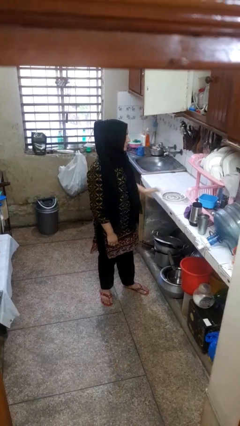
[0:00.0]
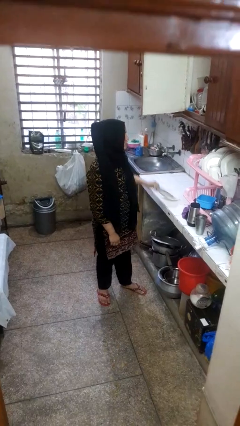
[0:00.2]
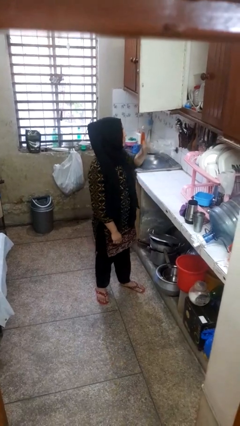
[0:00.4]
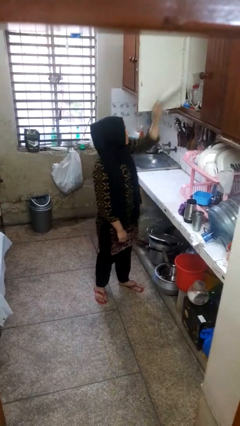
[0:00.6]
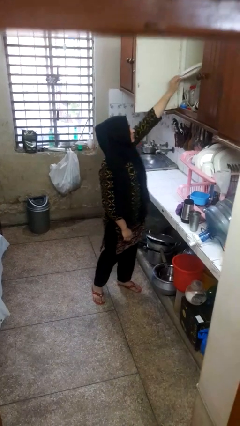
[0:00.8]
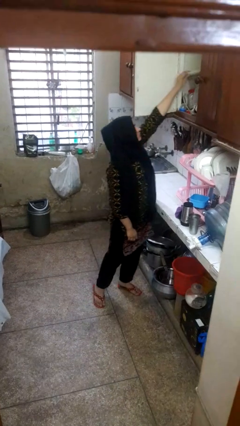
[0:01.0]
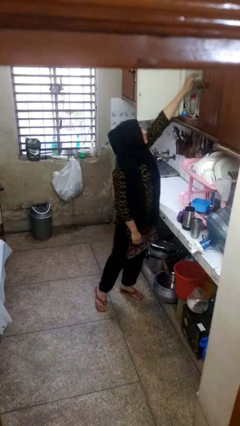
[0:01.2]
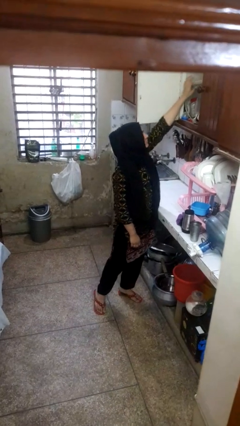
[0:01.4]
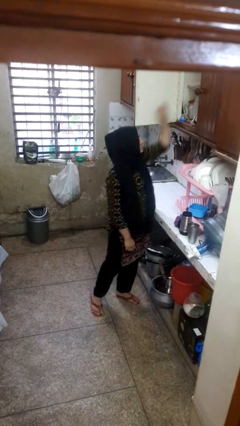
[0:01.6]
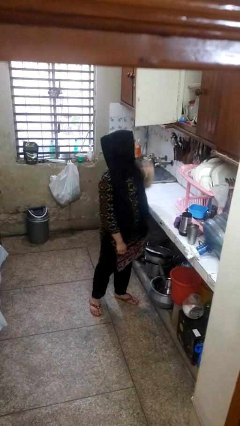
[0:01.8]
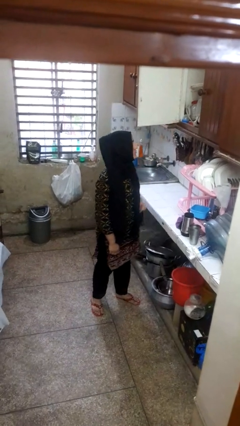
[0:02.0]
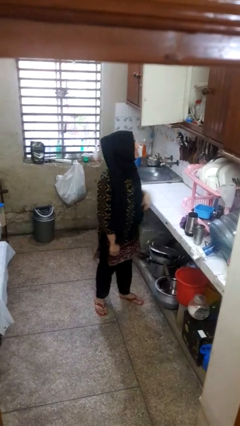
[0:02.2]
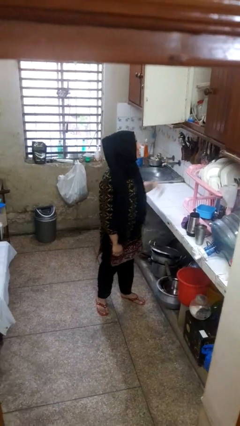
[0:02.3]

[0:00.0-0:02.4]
person puts object in cabinet

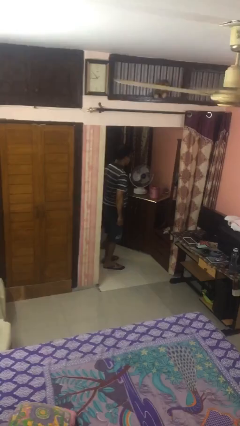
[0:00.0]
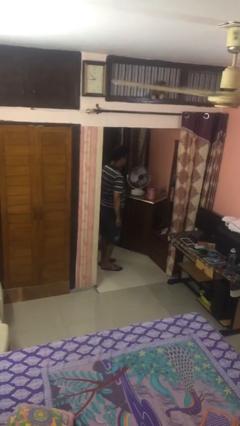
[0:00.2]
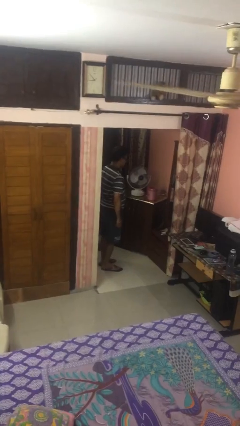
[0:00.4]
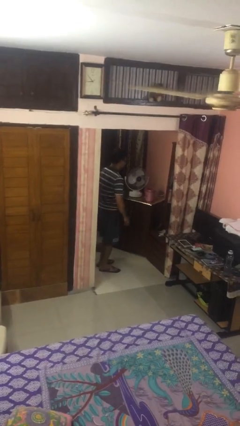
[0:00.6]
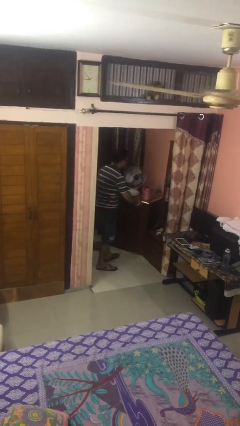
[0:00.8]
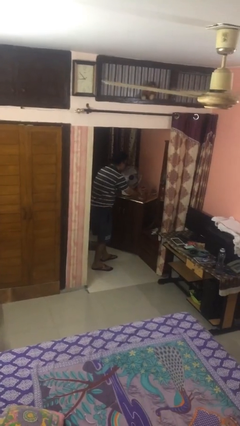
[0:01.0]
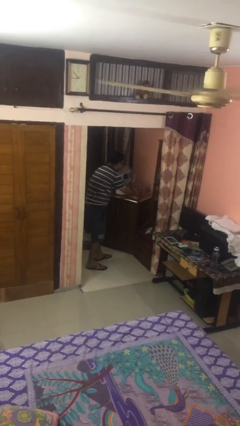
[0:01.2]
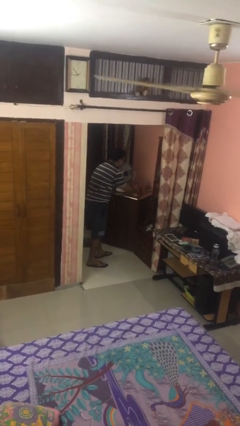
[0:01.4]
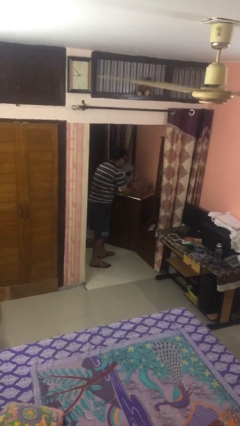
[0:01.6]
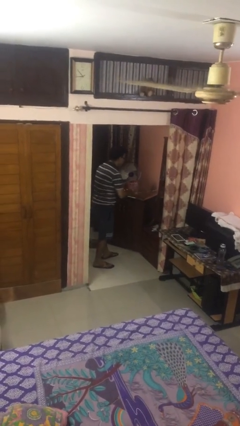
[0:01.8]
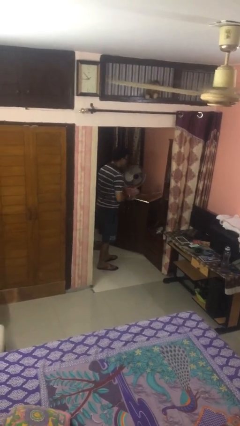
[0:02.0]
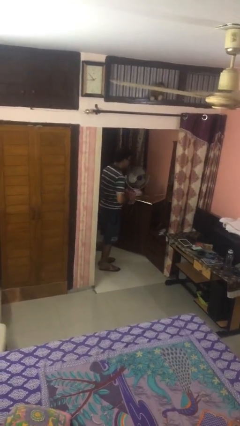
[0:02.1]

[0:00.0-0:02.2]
person picks up object from countertop

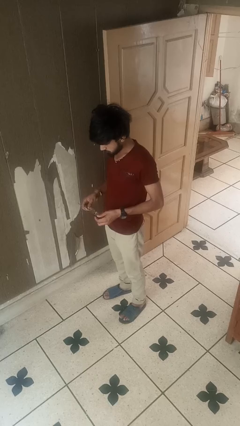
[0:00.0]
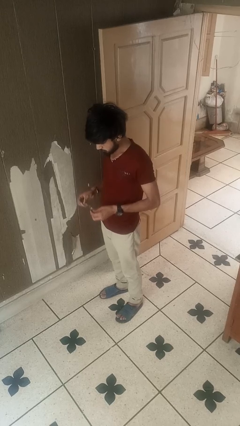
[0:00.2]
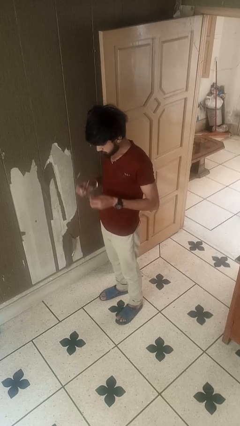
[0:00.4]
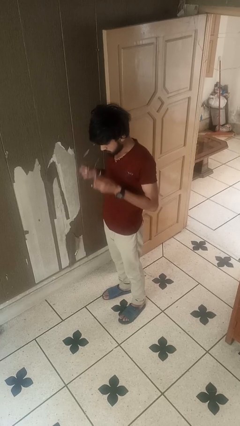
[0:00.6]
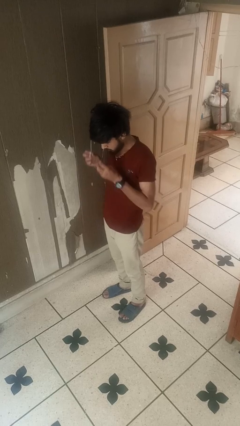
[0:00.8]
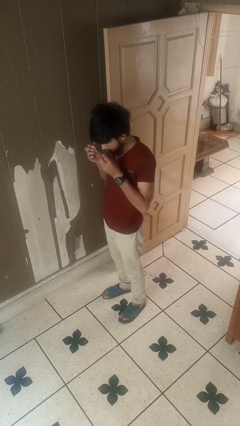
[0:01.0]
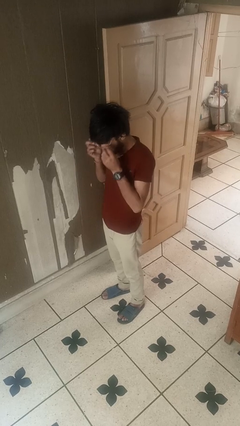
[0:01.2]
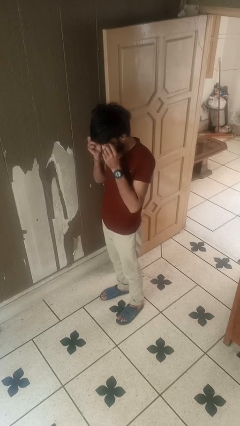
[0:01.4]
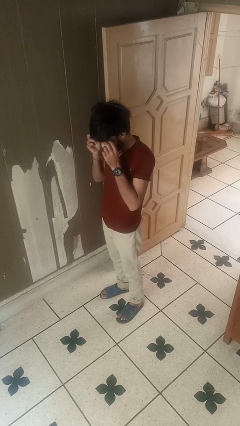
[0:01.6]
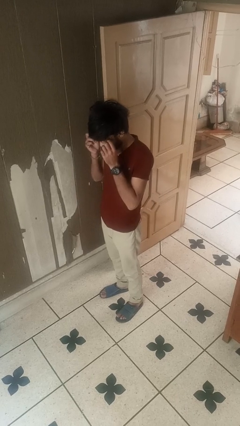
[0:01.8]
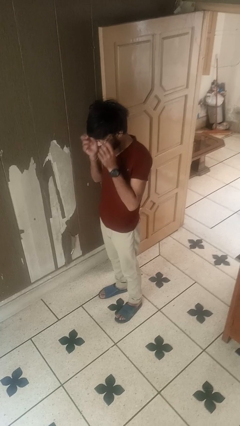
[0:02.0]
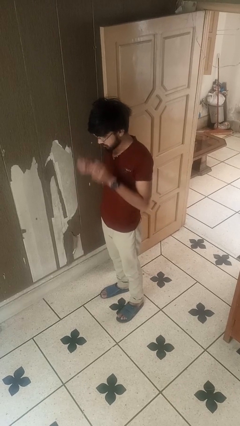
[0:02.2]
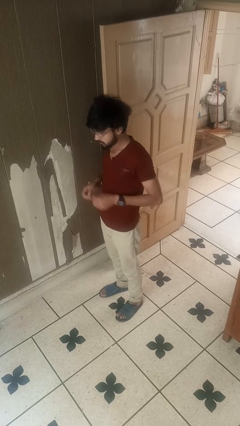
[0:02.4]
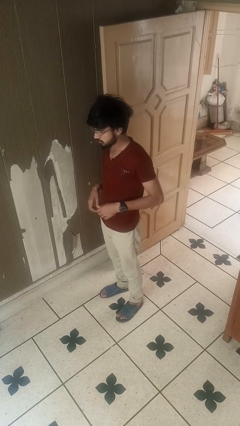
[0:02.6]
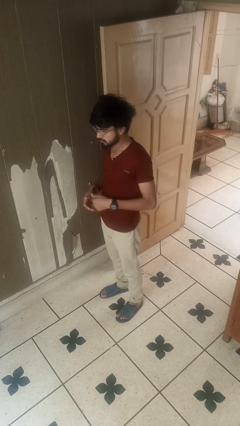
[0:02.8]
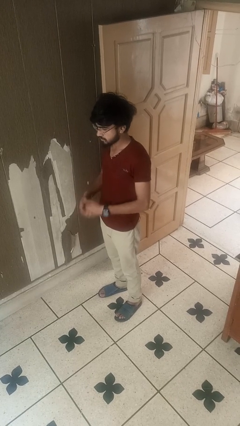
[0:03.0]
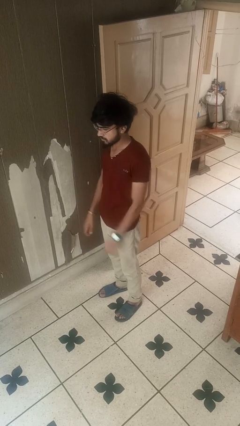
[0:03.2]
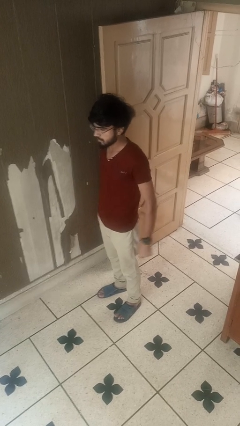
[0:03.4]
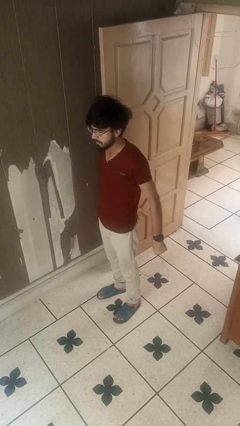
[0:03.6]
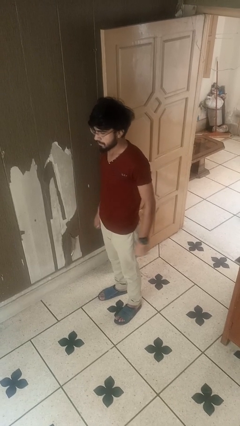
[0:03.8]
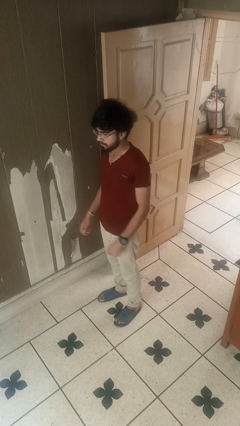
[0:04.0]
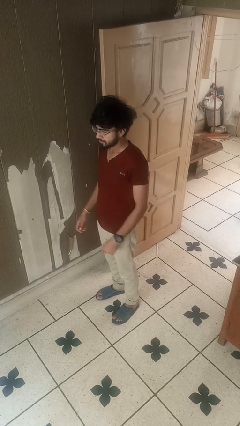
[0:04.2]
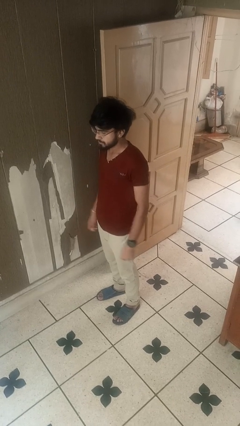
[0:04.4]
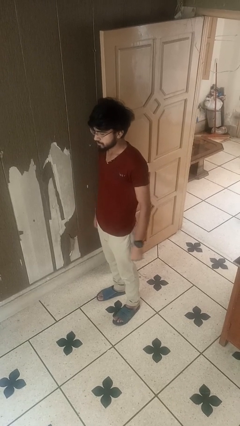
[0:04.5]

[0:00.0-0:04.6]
person puts on glasses

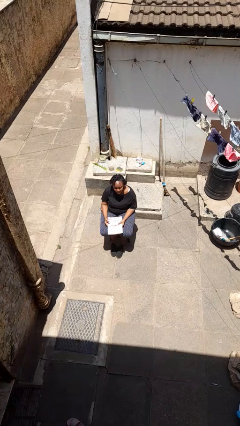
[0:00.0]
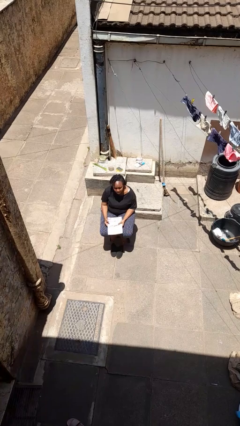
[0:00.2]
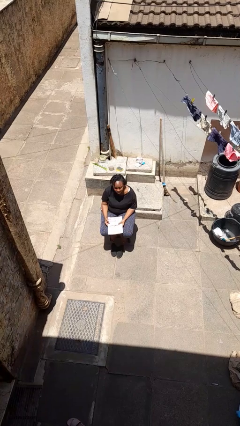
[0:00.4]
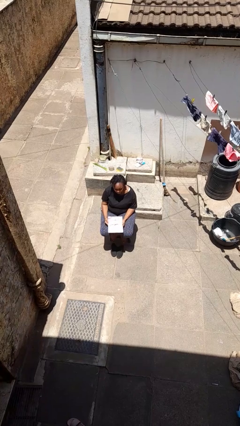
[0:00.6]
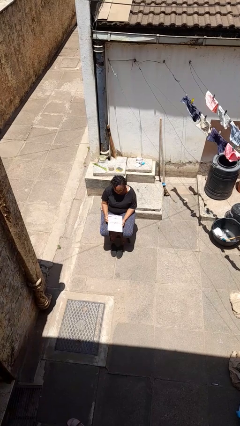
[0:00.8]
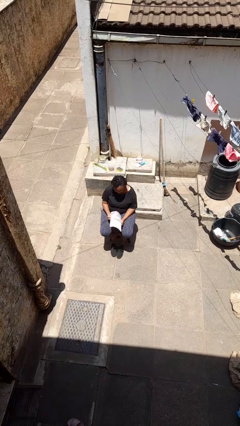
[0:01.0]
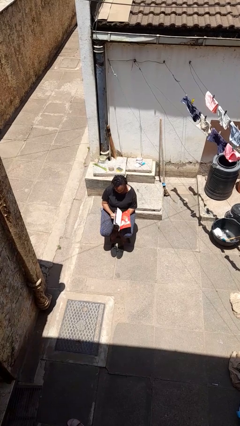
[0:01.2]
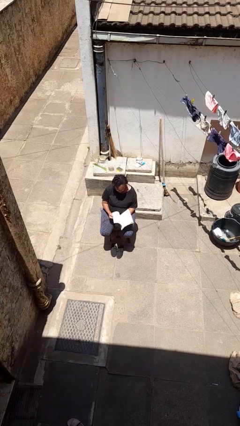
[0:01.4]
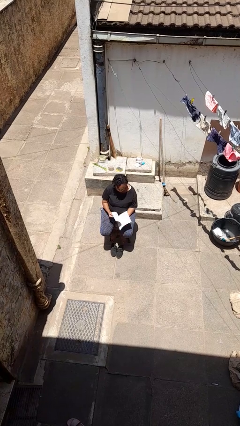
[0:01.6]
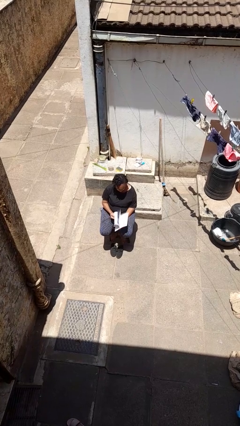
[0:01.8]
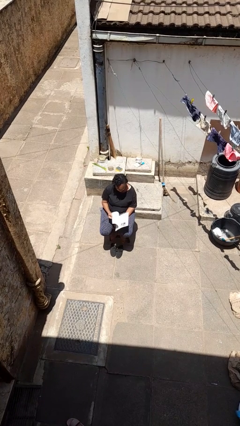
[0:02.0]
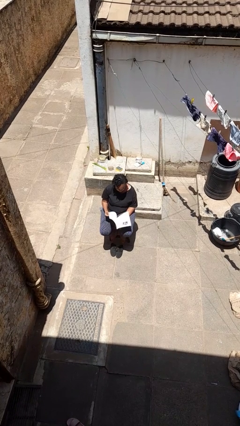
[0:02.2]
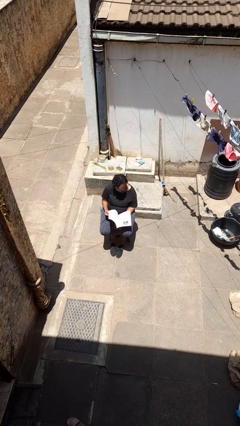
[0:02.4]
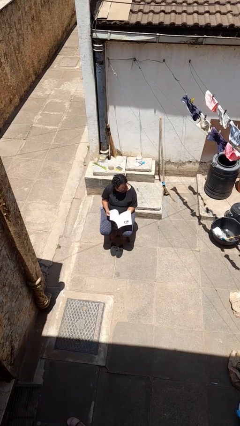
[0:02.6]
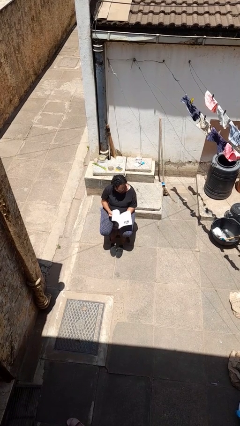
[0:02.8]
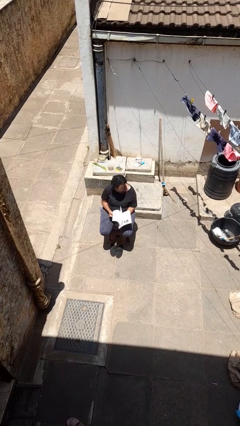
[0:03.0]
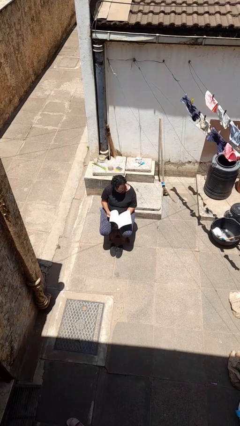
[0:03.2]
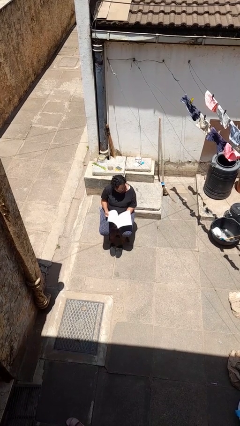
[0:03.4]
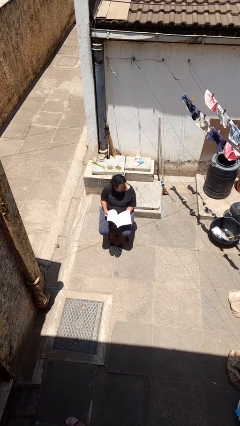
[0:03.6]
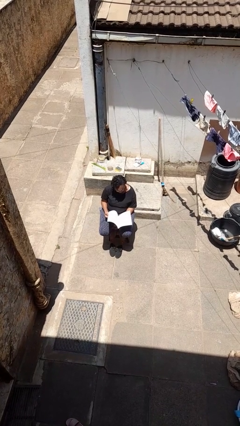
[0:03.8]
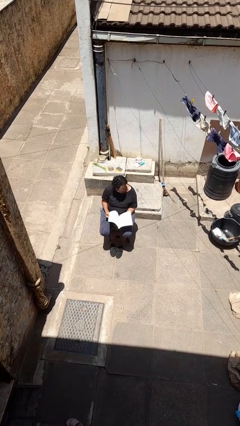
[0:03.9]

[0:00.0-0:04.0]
person reads magazine

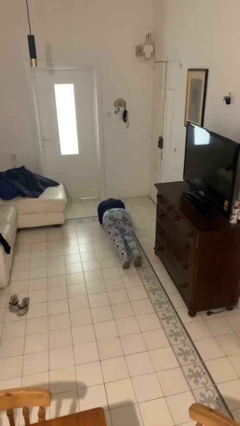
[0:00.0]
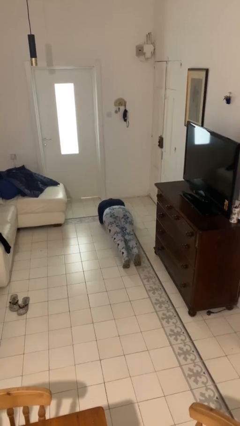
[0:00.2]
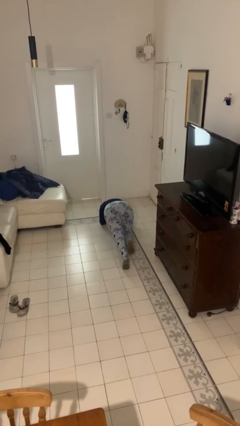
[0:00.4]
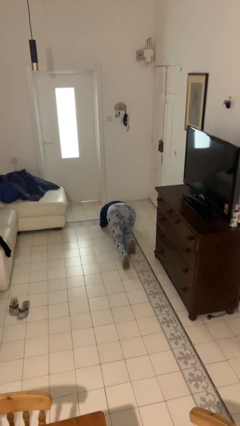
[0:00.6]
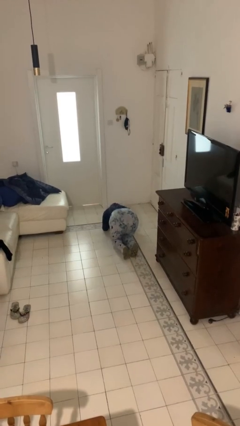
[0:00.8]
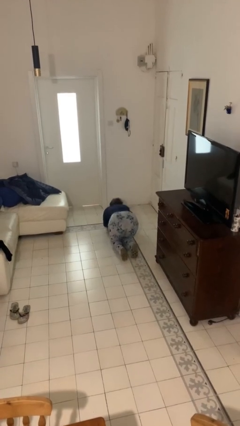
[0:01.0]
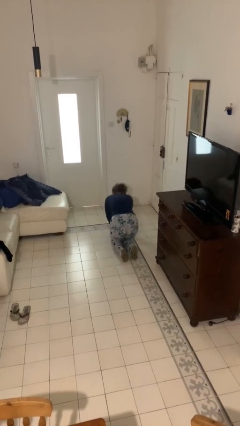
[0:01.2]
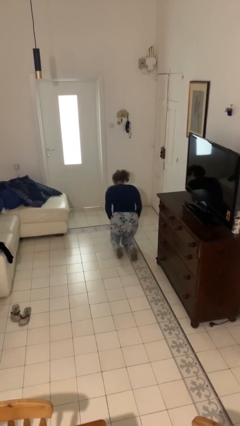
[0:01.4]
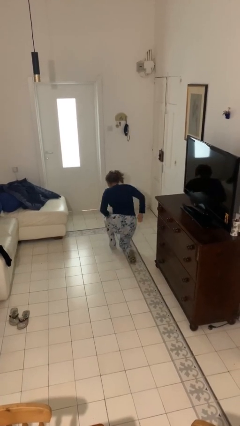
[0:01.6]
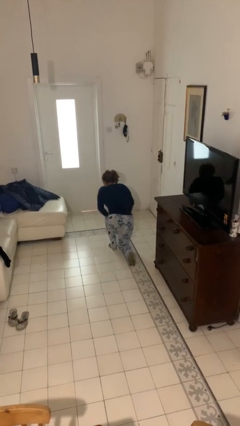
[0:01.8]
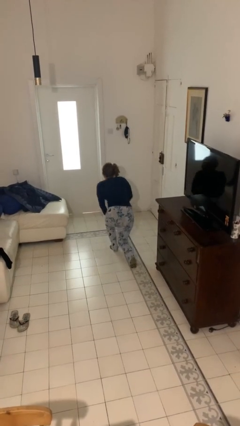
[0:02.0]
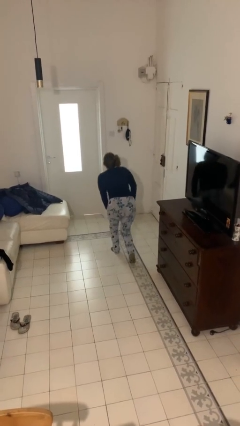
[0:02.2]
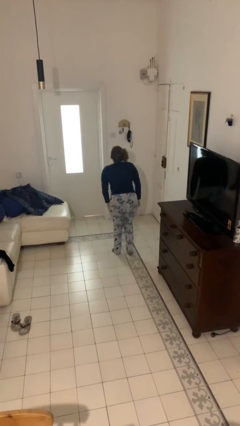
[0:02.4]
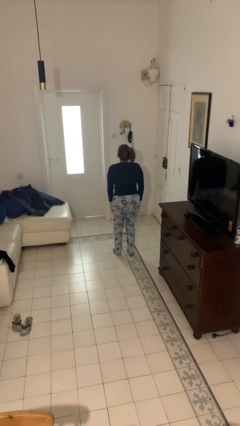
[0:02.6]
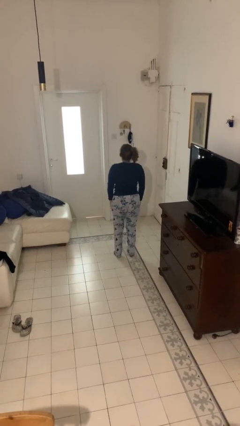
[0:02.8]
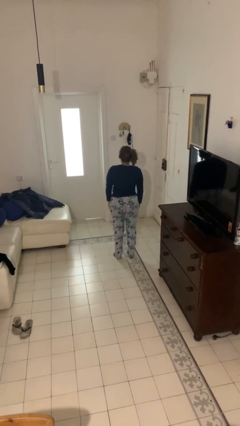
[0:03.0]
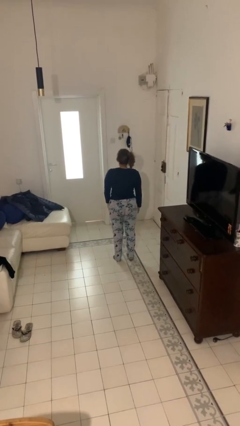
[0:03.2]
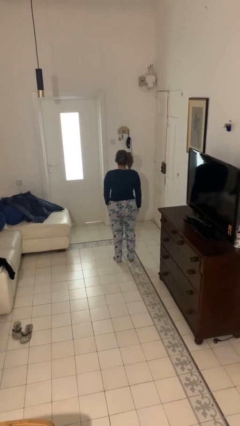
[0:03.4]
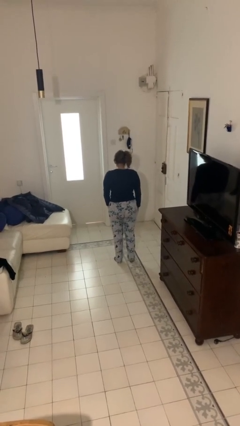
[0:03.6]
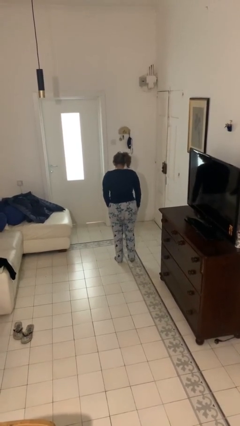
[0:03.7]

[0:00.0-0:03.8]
person stands up from floor

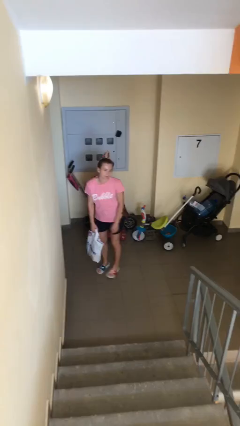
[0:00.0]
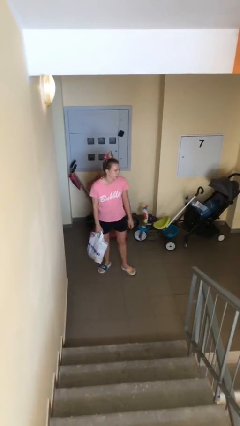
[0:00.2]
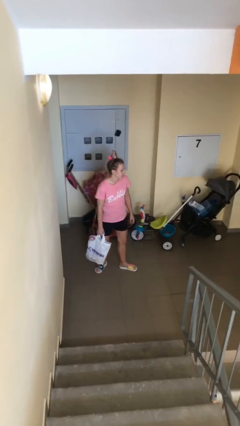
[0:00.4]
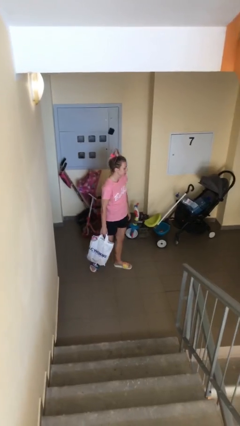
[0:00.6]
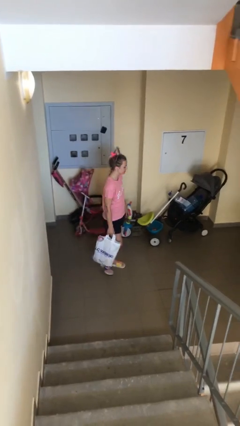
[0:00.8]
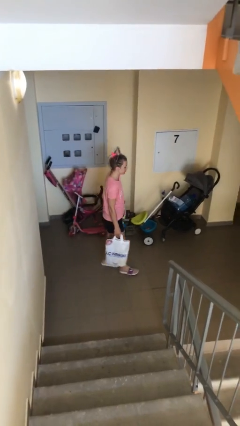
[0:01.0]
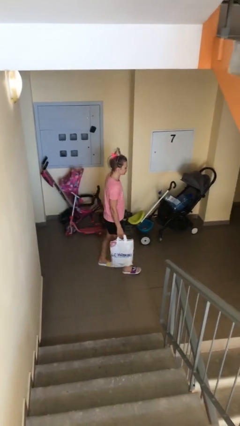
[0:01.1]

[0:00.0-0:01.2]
person carries groceries
